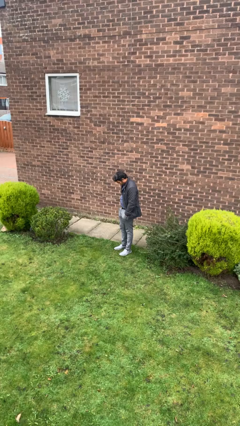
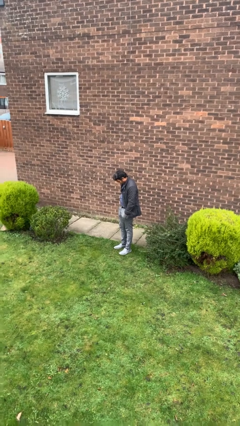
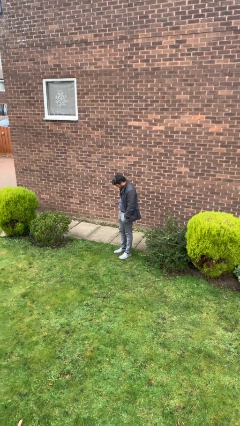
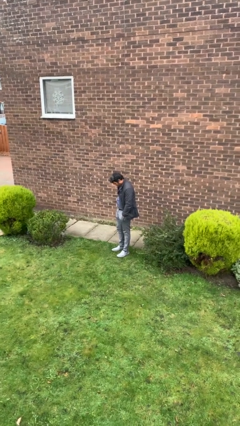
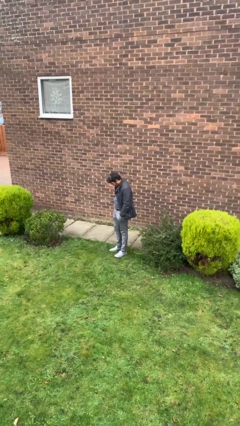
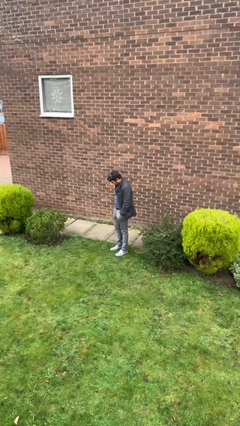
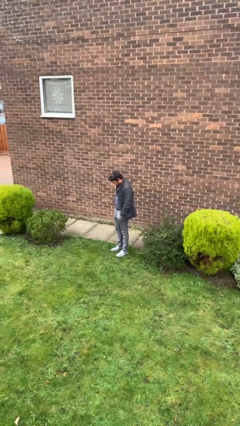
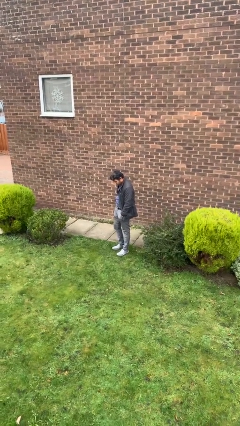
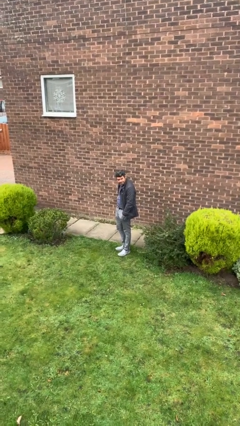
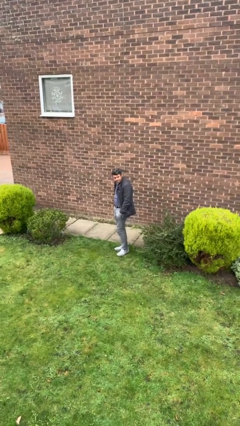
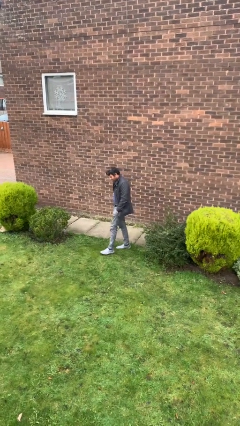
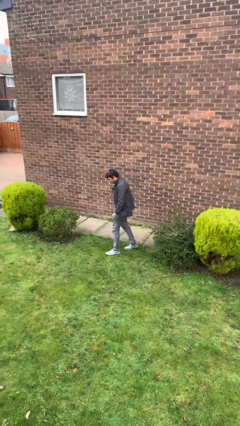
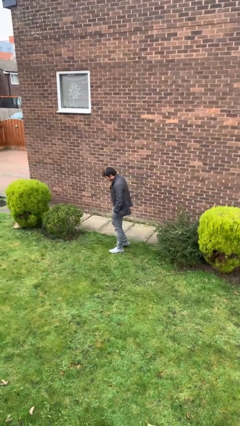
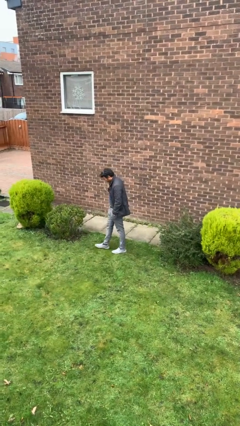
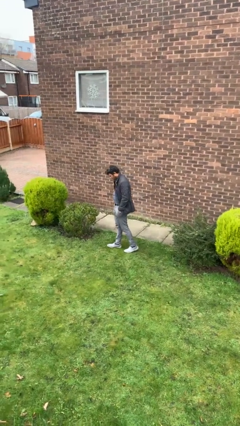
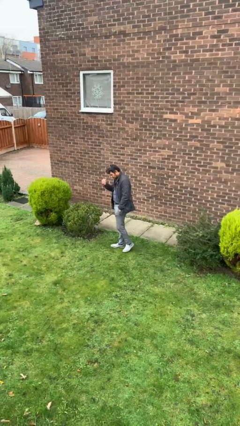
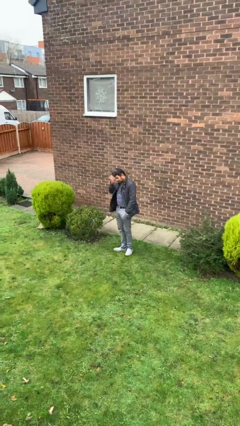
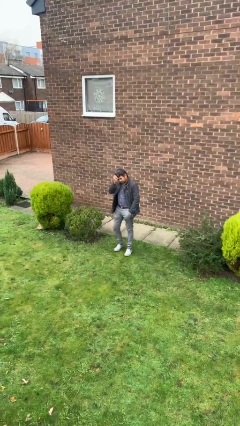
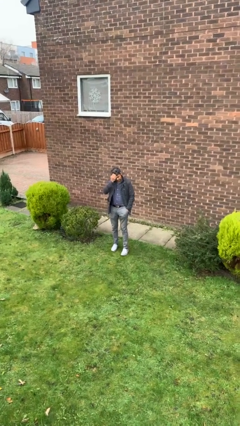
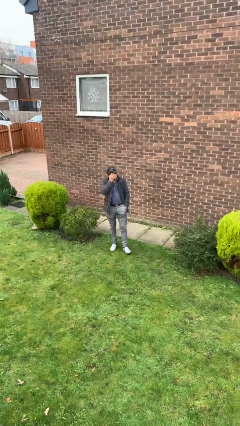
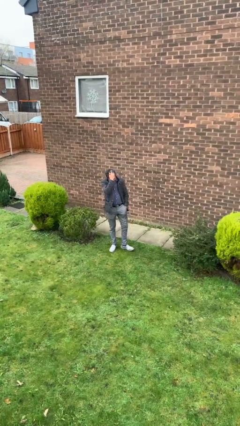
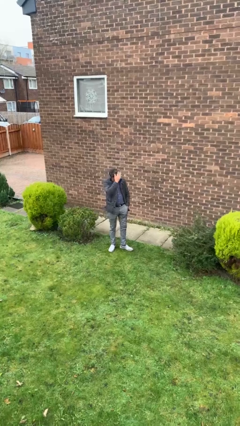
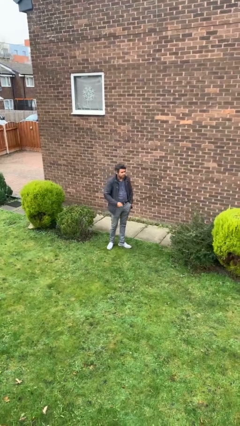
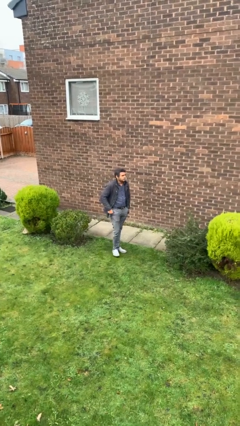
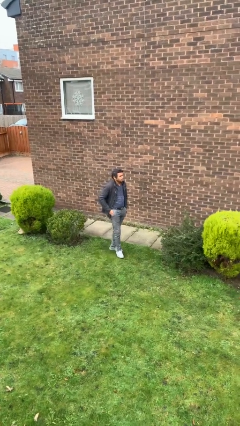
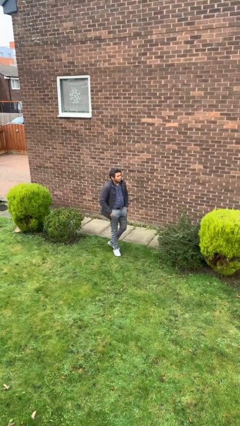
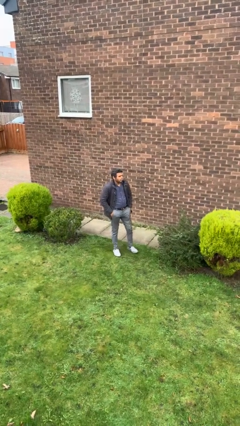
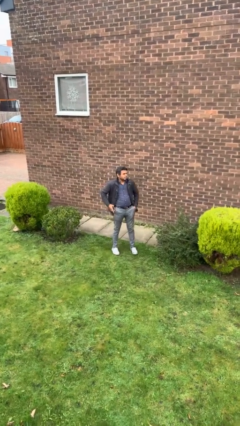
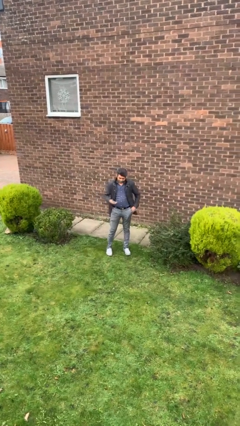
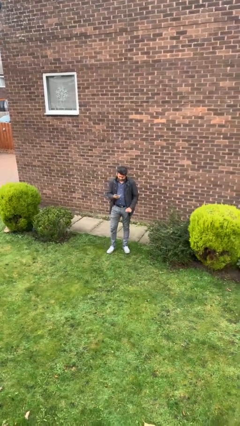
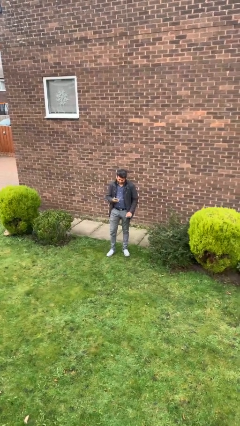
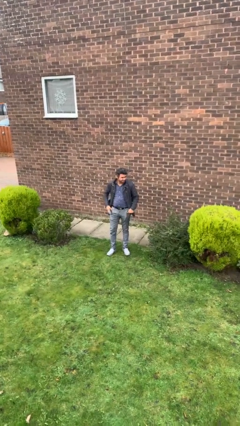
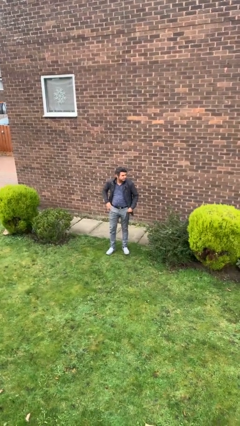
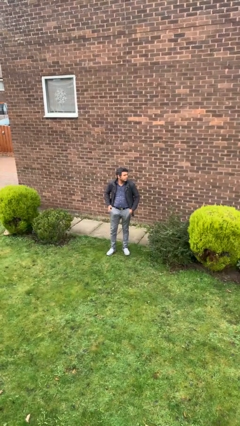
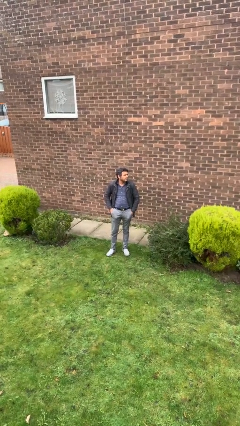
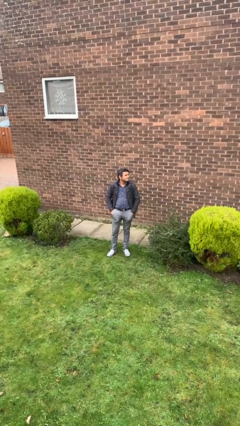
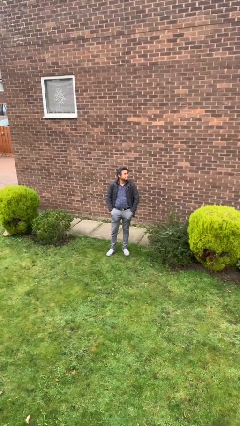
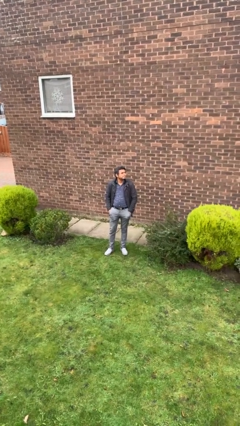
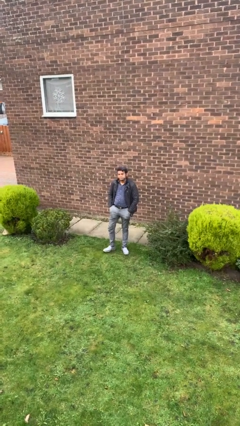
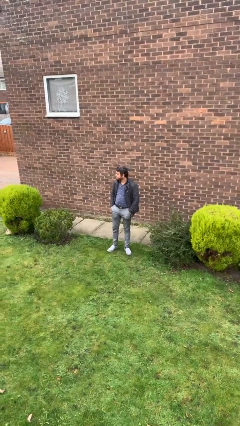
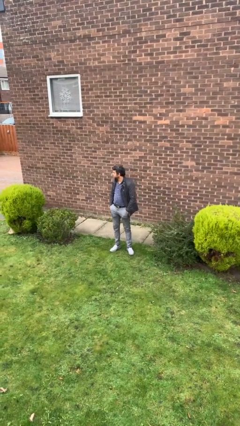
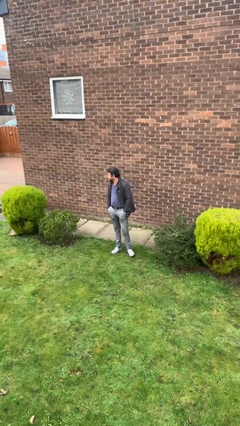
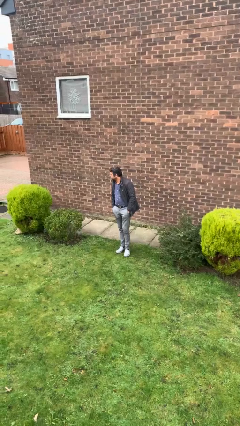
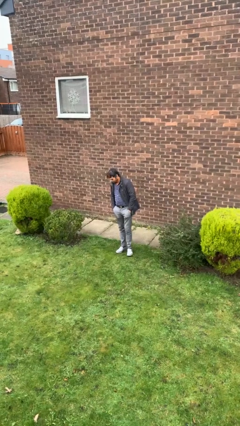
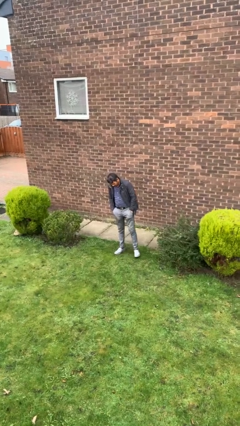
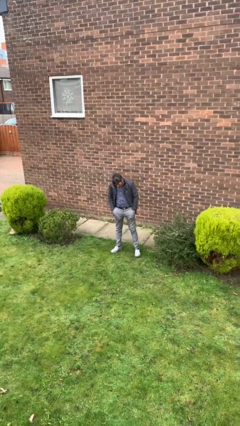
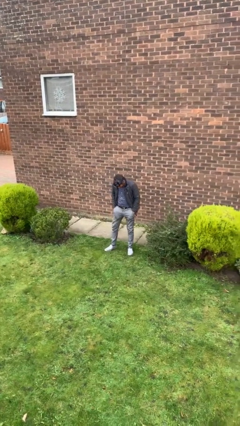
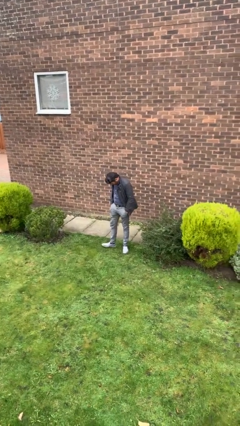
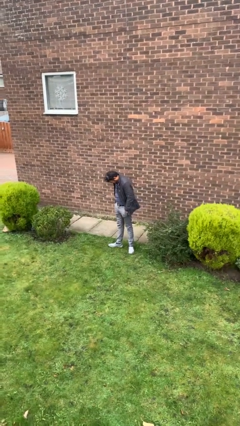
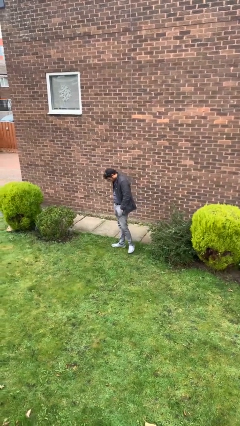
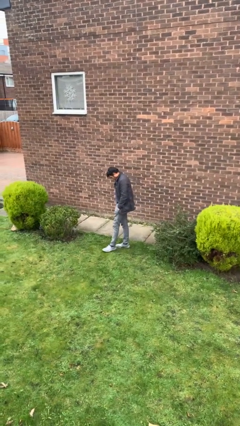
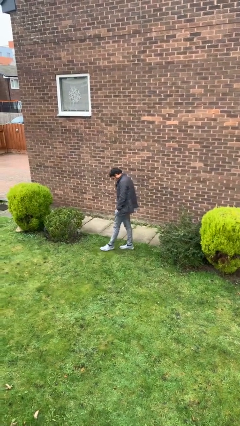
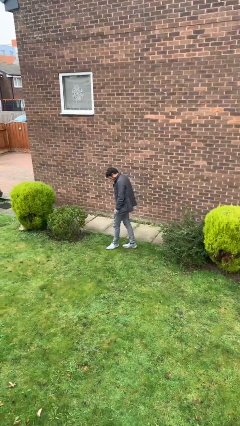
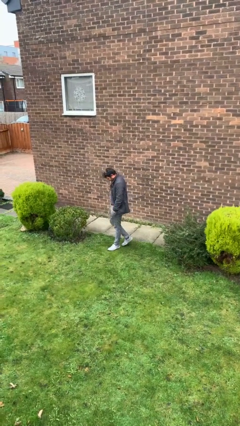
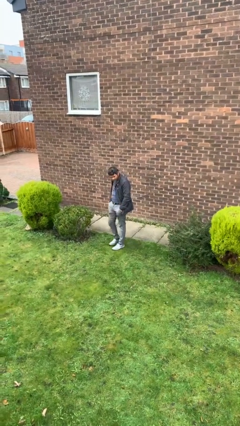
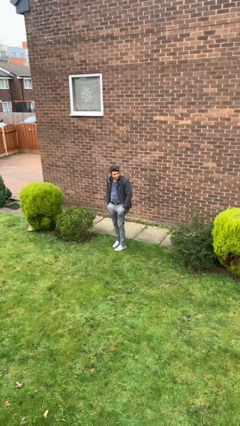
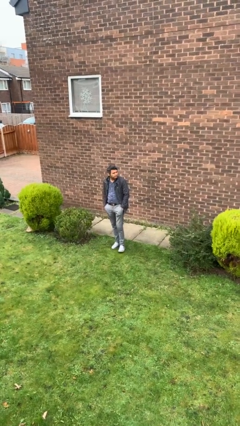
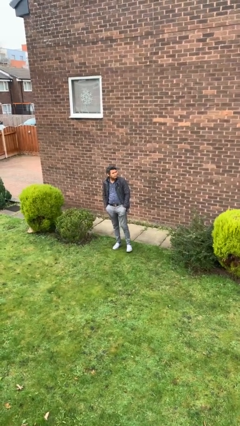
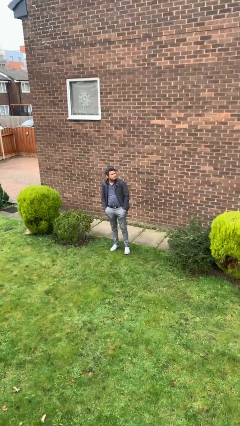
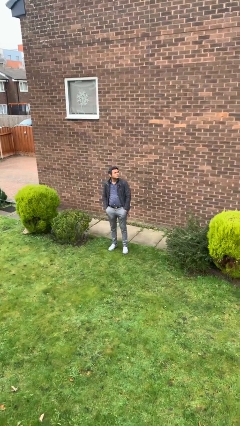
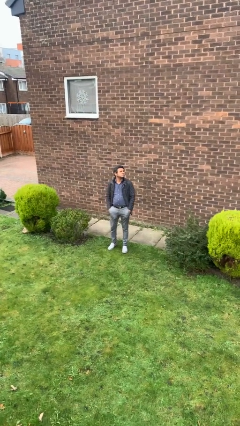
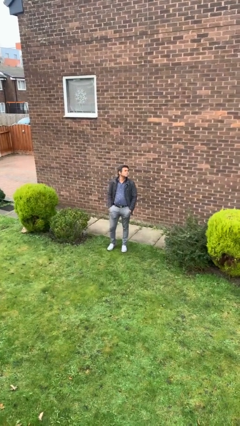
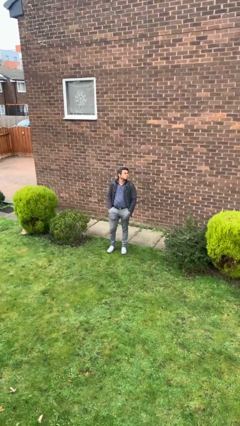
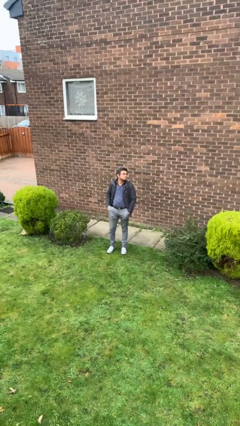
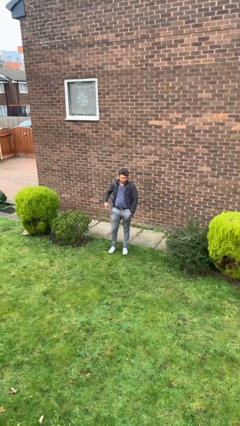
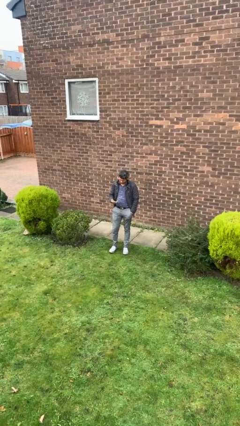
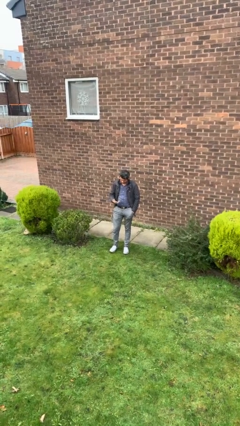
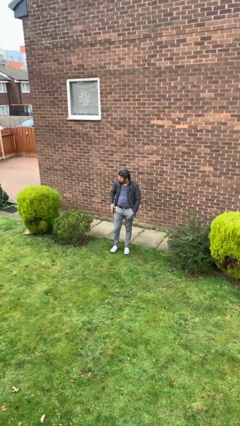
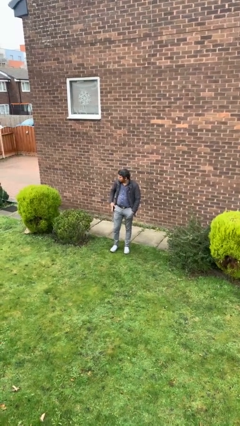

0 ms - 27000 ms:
person walks

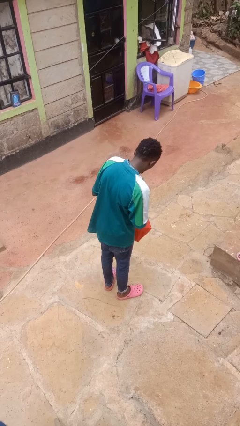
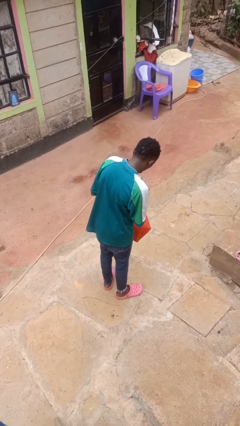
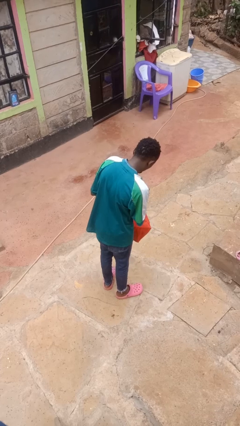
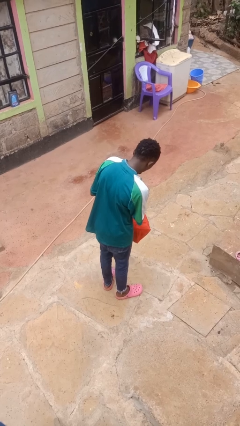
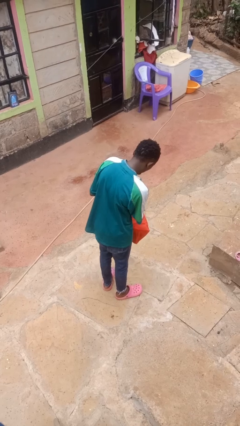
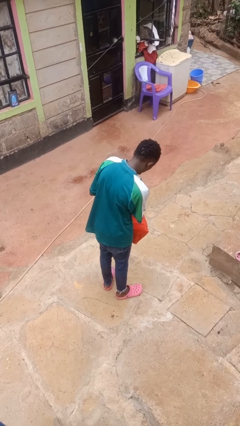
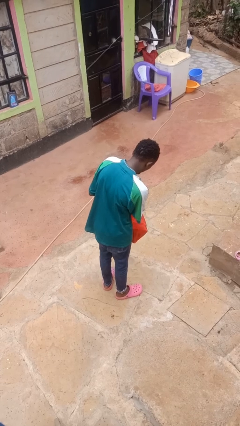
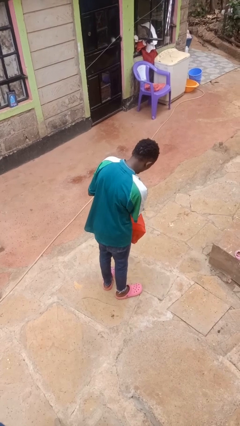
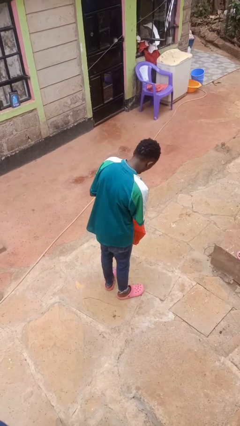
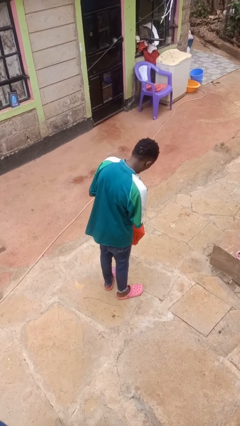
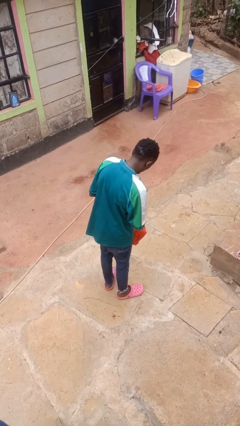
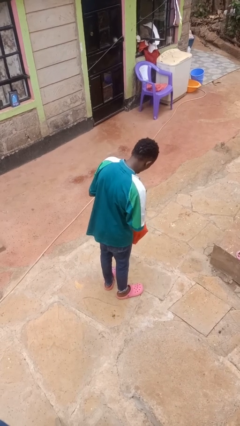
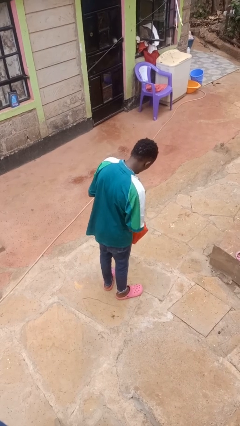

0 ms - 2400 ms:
person puts object into bag

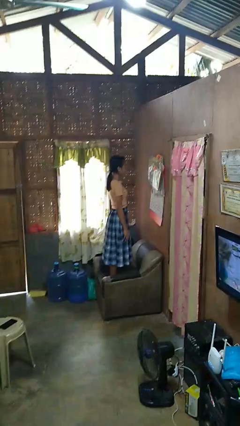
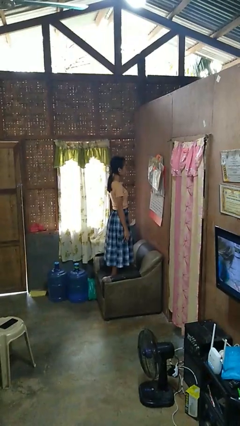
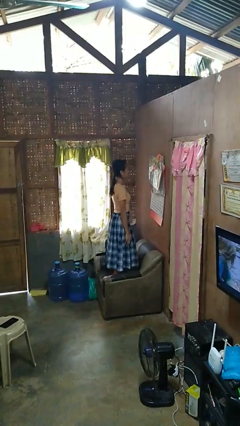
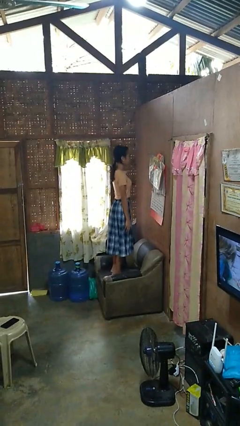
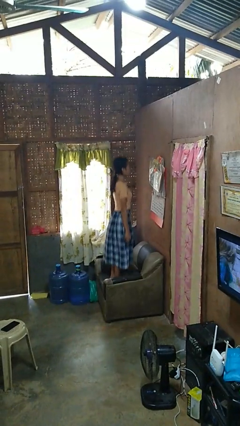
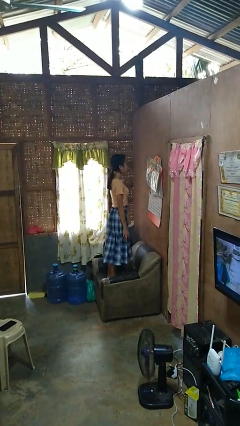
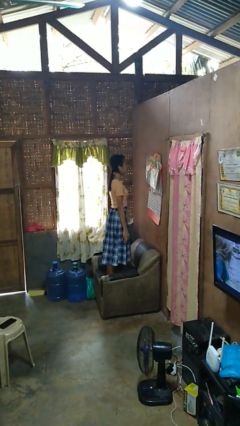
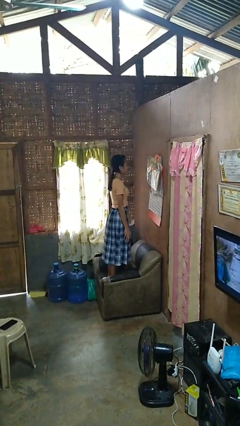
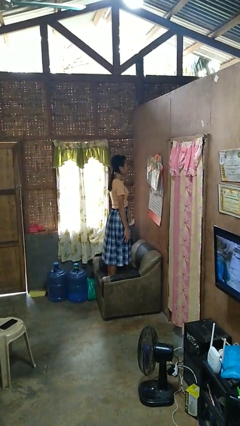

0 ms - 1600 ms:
person jumps on couch

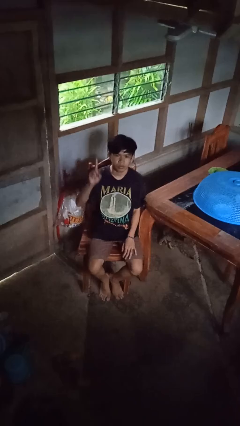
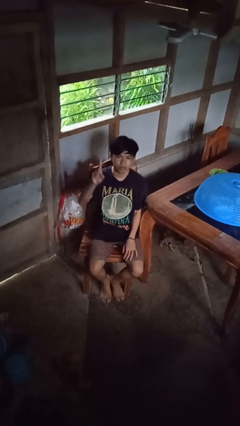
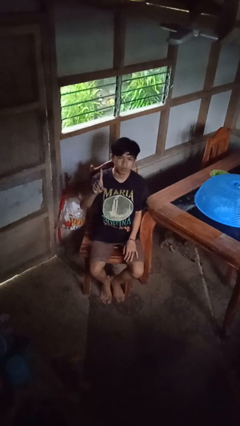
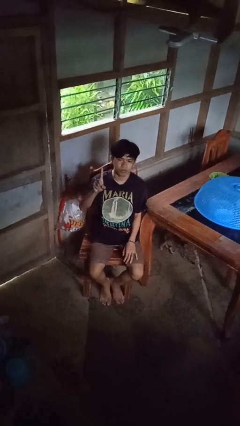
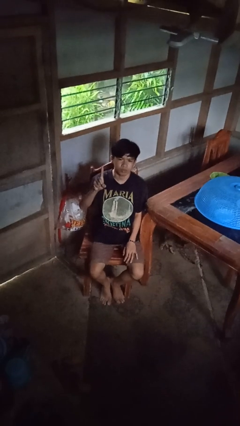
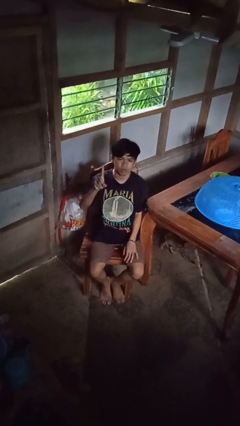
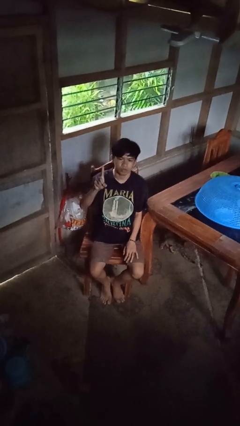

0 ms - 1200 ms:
person gestures number one
